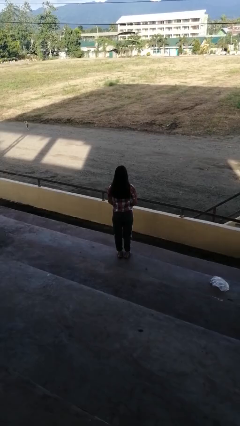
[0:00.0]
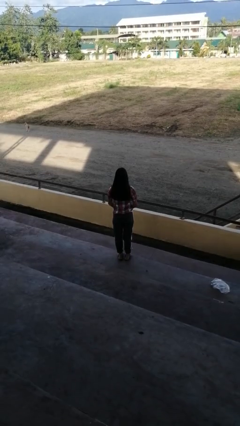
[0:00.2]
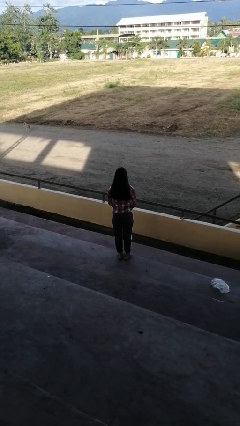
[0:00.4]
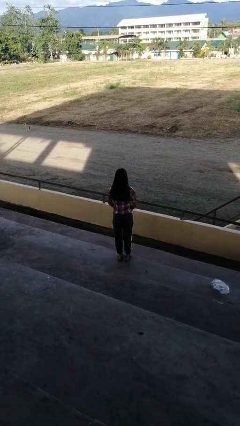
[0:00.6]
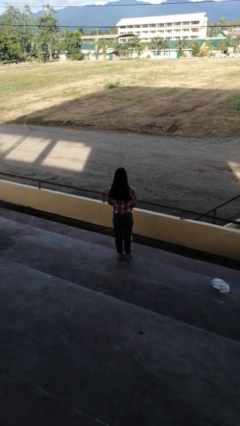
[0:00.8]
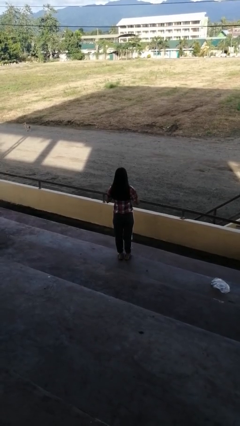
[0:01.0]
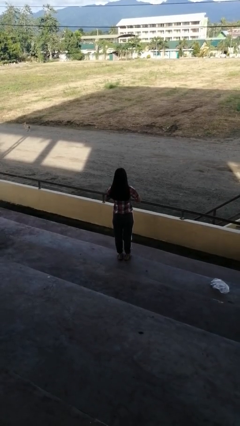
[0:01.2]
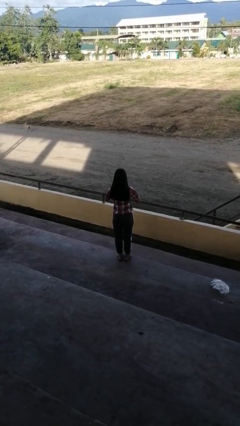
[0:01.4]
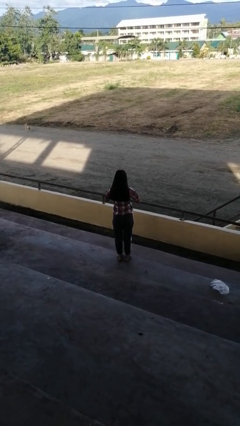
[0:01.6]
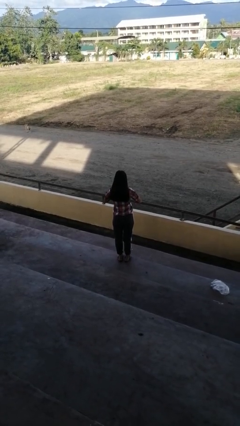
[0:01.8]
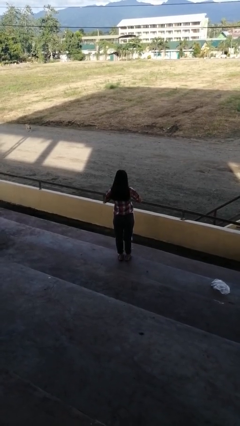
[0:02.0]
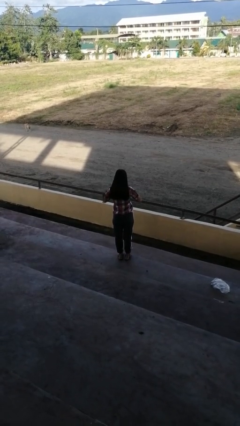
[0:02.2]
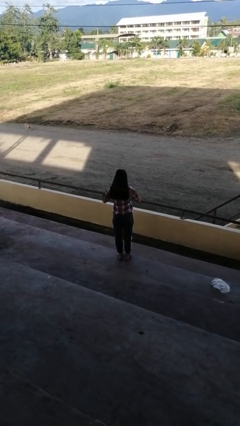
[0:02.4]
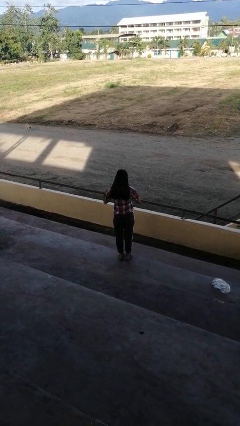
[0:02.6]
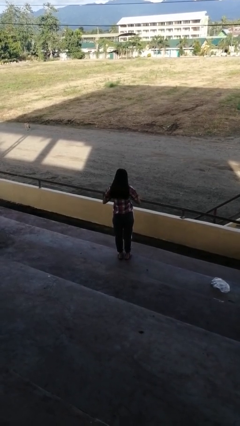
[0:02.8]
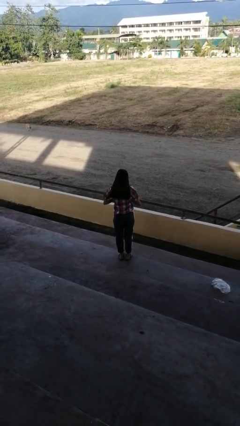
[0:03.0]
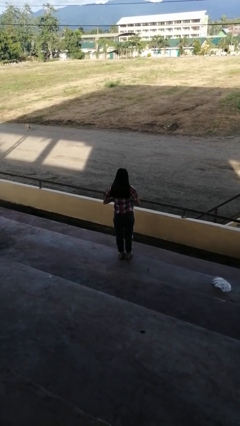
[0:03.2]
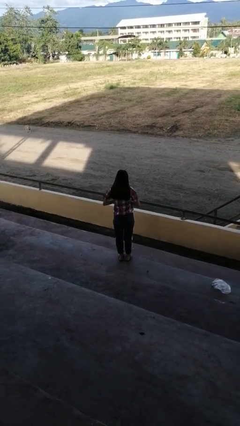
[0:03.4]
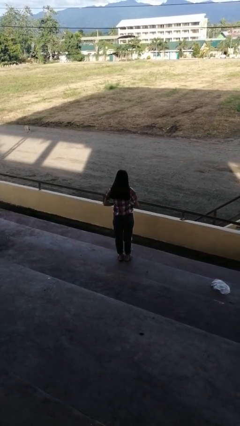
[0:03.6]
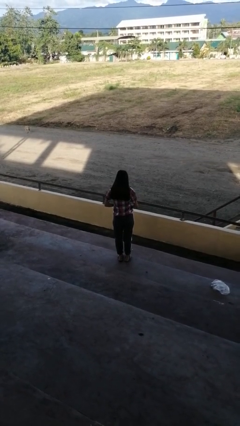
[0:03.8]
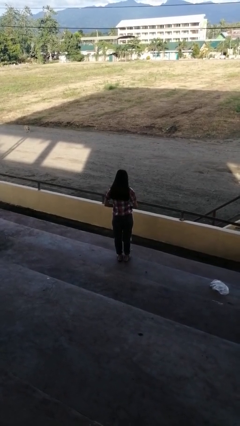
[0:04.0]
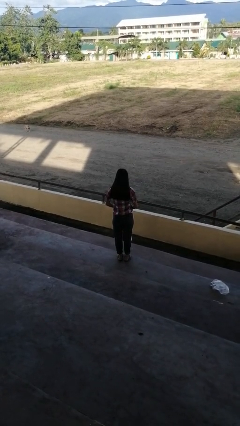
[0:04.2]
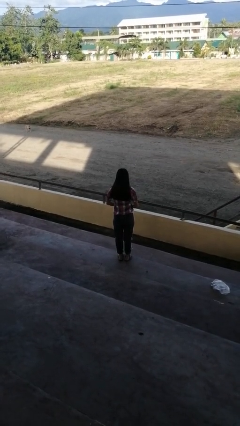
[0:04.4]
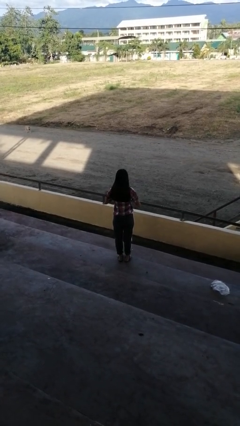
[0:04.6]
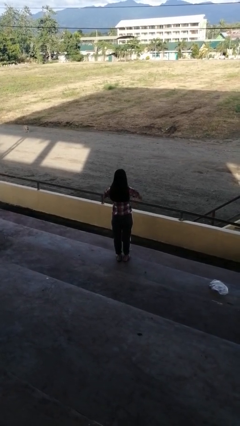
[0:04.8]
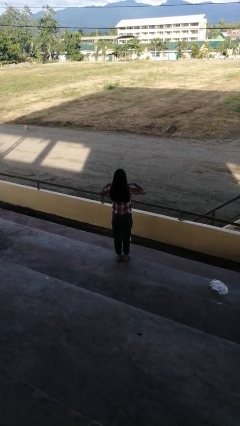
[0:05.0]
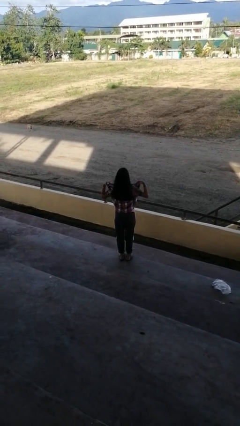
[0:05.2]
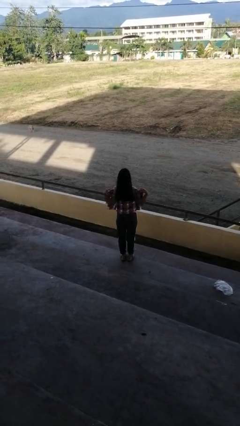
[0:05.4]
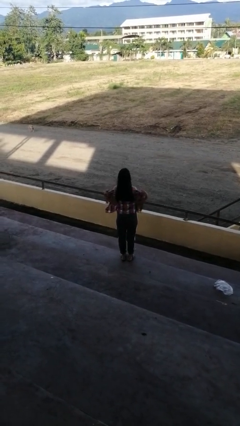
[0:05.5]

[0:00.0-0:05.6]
person unbuttons shirt

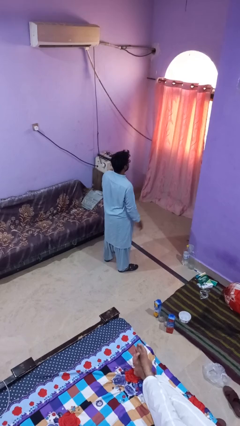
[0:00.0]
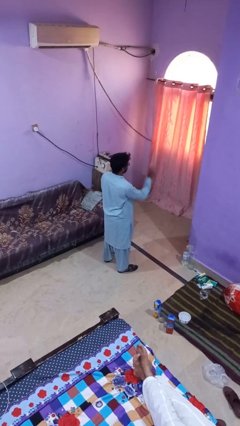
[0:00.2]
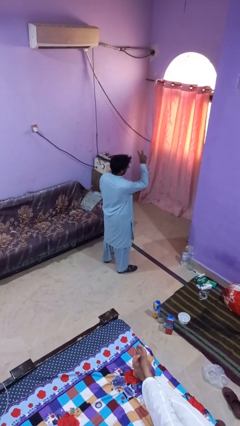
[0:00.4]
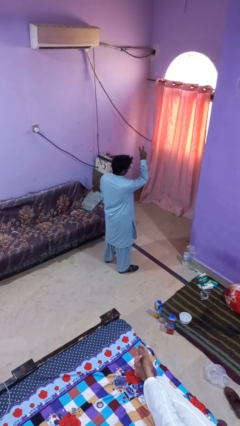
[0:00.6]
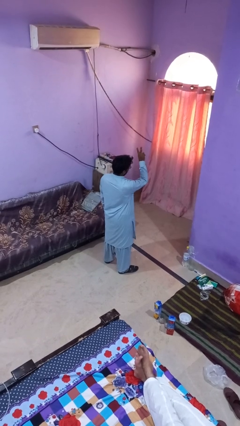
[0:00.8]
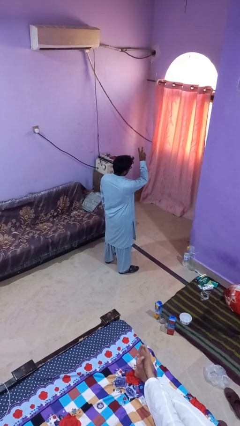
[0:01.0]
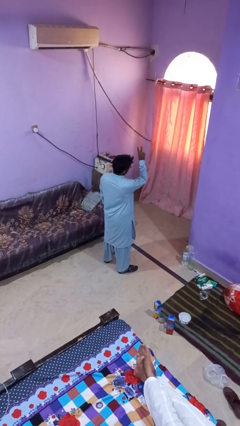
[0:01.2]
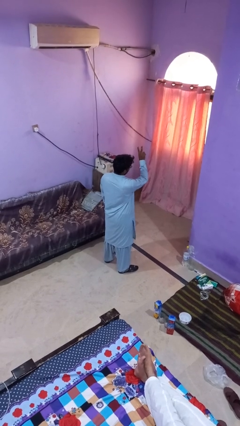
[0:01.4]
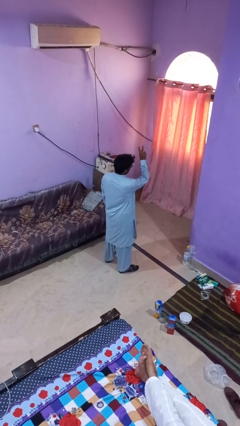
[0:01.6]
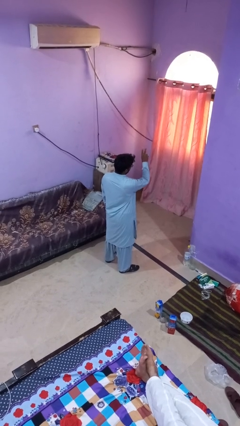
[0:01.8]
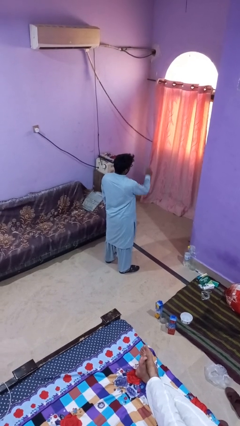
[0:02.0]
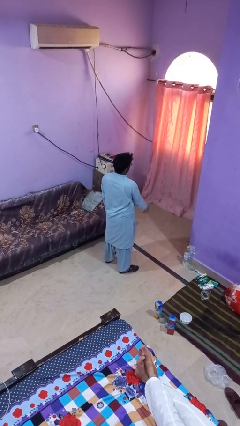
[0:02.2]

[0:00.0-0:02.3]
person gestures peace

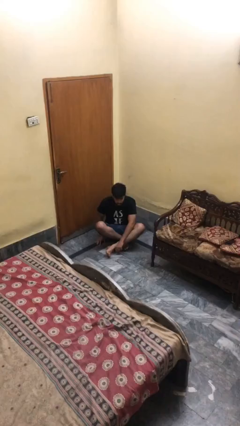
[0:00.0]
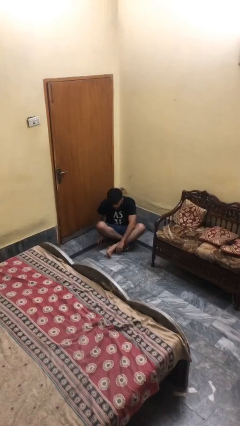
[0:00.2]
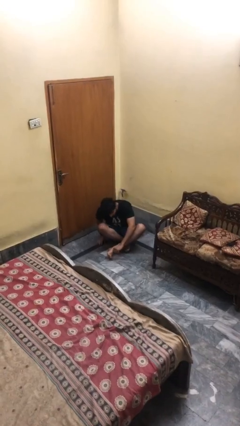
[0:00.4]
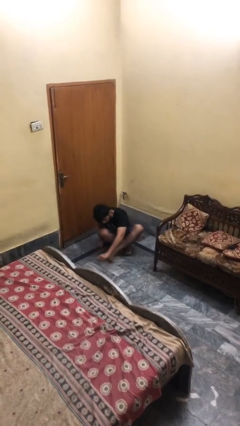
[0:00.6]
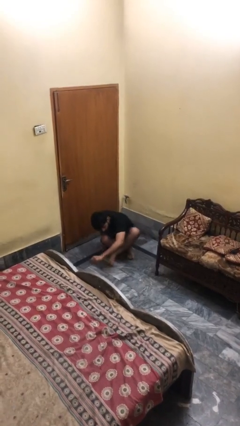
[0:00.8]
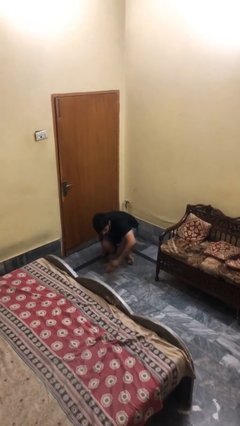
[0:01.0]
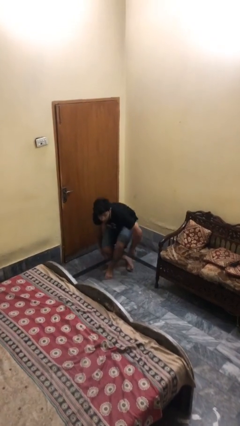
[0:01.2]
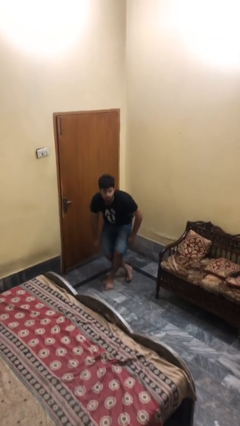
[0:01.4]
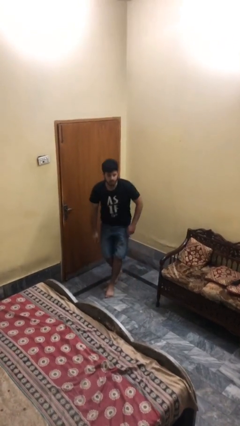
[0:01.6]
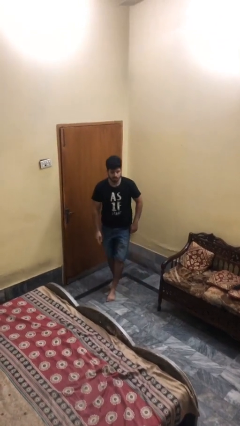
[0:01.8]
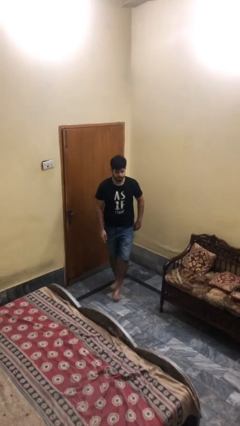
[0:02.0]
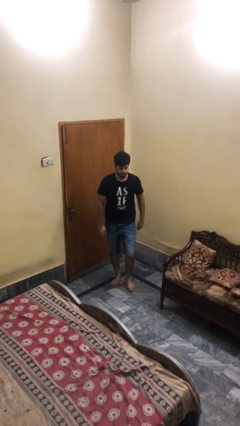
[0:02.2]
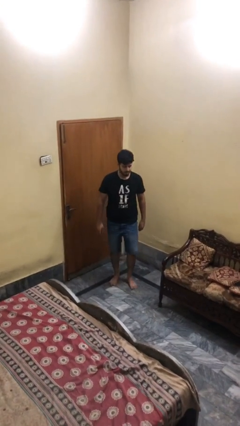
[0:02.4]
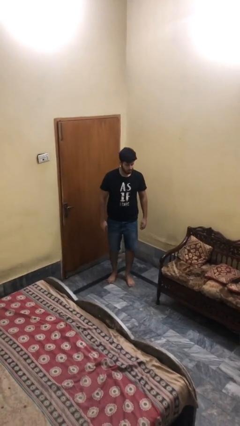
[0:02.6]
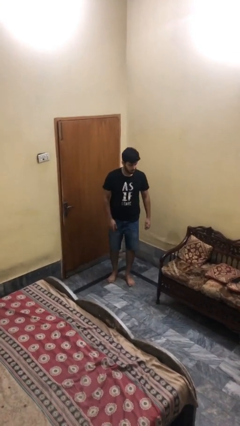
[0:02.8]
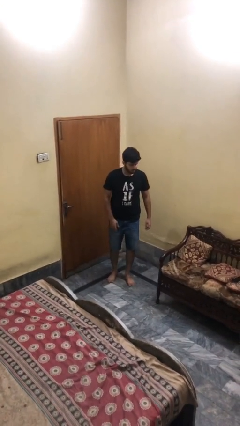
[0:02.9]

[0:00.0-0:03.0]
person stands up from floor

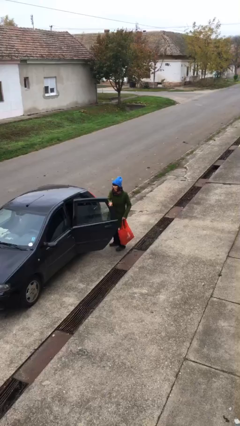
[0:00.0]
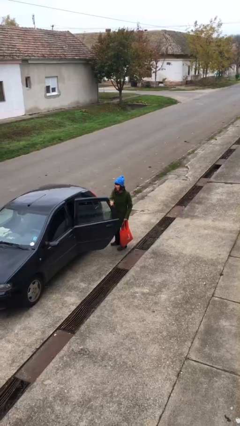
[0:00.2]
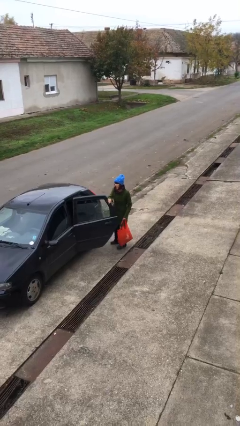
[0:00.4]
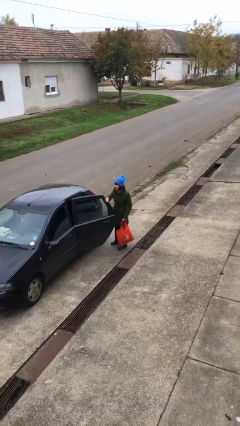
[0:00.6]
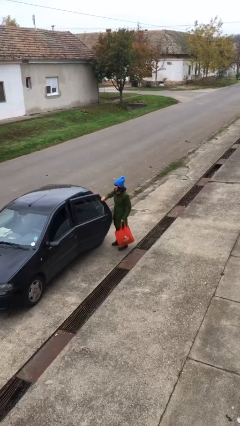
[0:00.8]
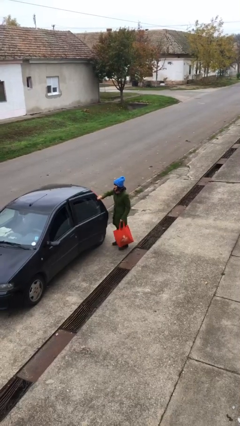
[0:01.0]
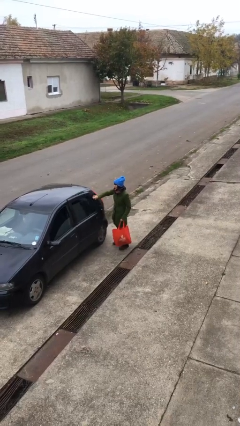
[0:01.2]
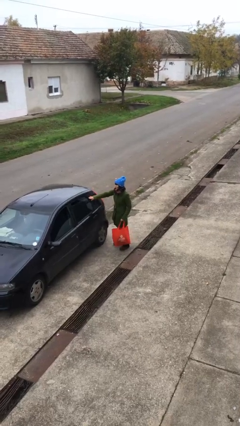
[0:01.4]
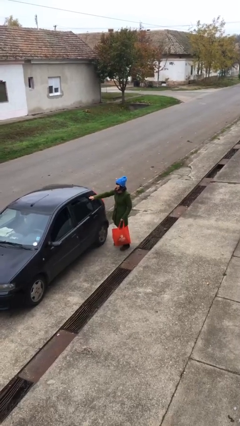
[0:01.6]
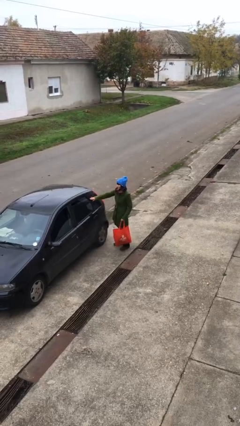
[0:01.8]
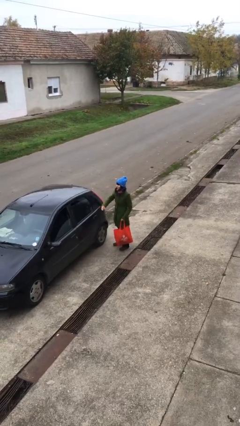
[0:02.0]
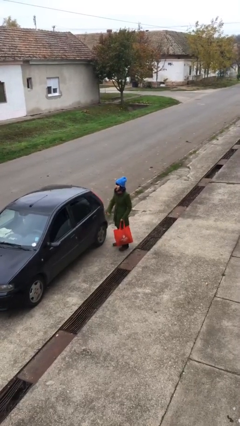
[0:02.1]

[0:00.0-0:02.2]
person closes car door

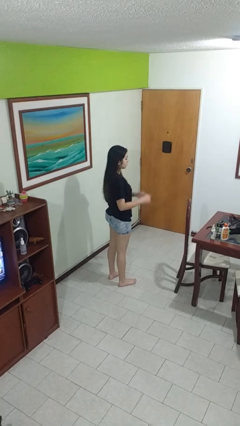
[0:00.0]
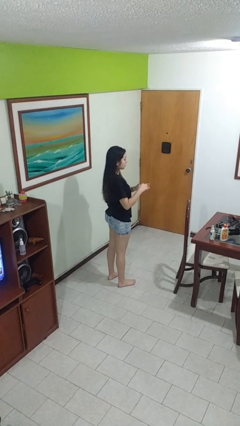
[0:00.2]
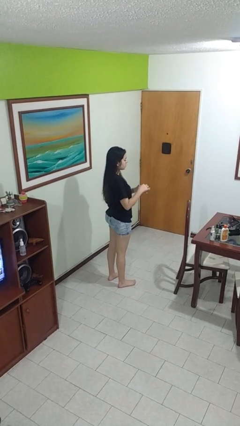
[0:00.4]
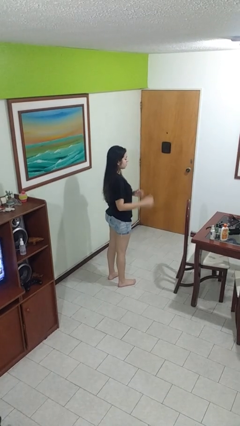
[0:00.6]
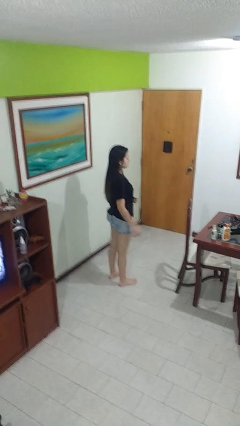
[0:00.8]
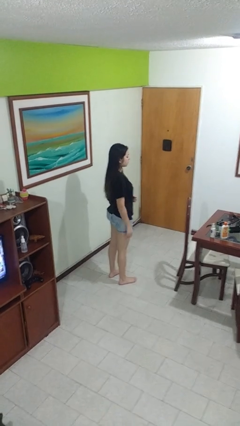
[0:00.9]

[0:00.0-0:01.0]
person puts on ring

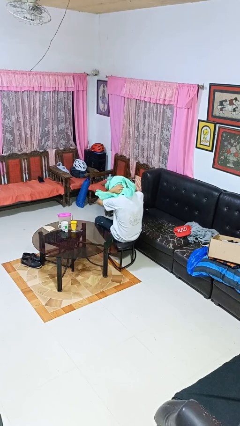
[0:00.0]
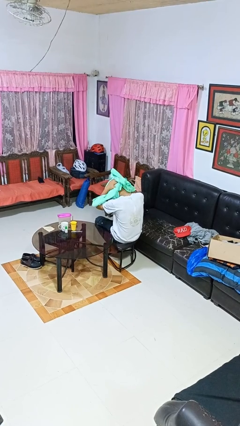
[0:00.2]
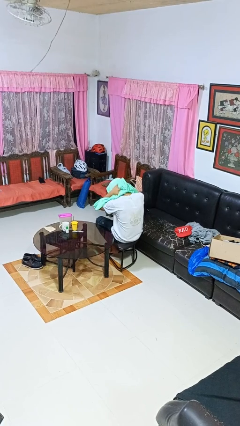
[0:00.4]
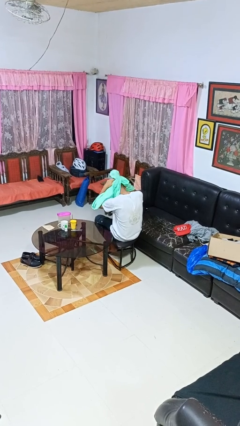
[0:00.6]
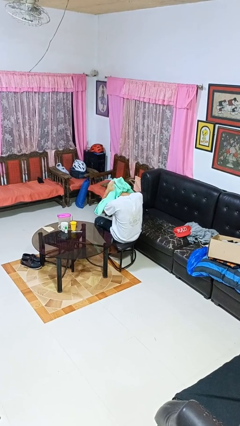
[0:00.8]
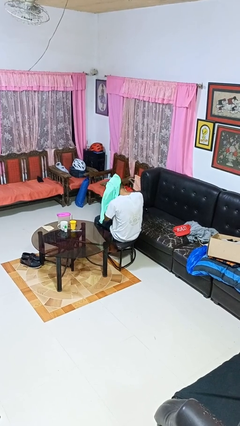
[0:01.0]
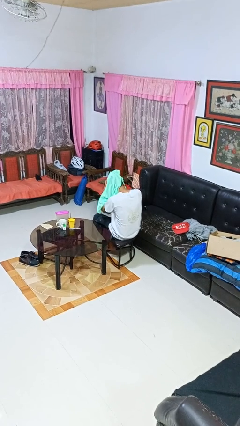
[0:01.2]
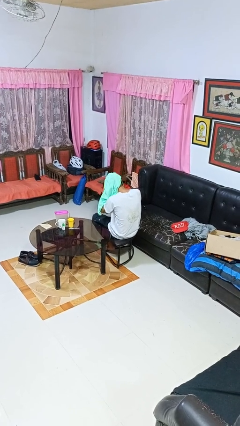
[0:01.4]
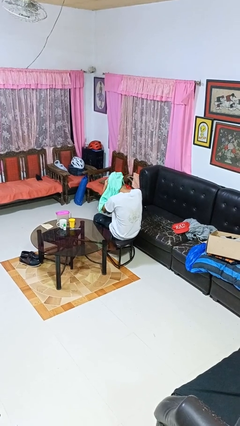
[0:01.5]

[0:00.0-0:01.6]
person dries hair with towel

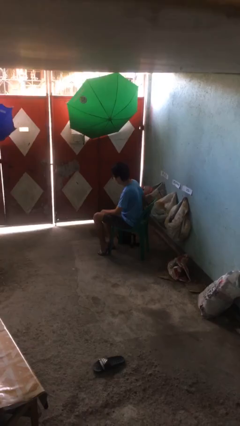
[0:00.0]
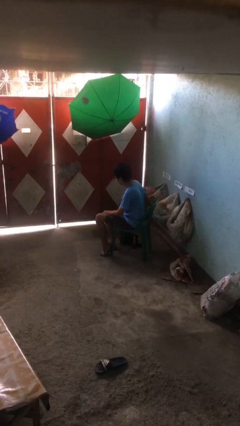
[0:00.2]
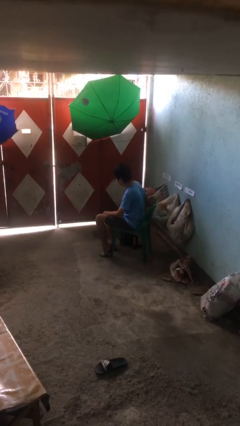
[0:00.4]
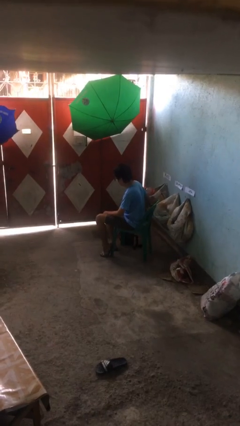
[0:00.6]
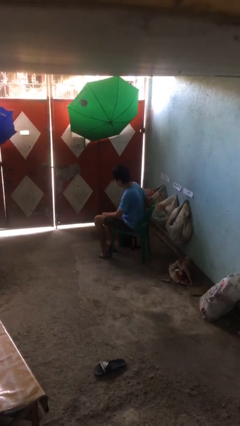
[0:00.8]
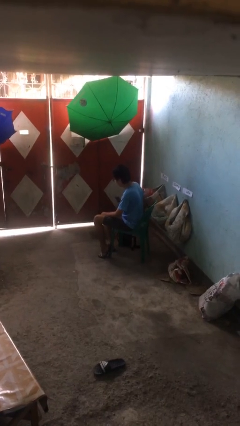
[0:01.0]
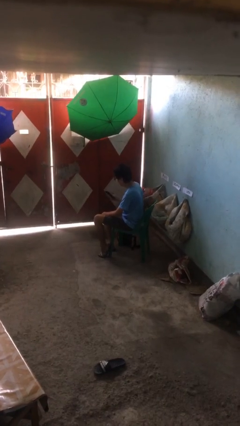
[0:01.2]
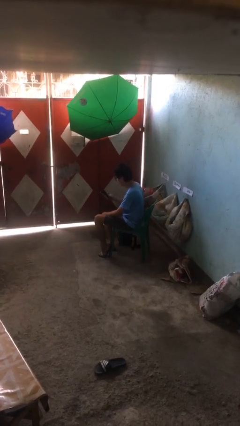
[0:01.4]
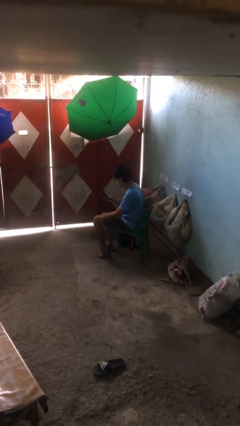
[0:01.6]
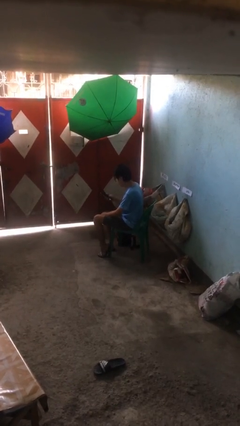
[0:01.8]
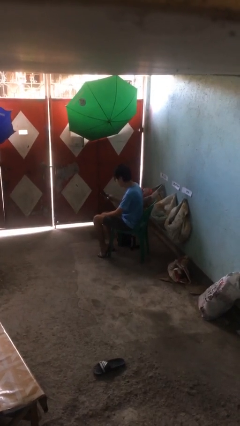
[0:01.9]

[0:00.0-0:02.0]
person takes phone from pocket
